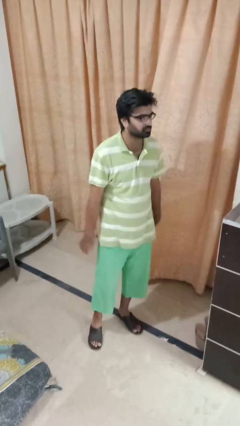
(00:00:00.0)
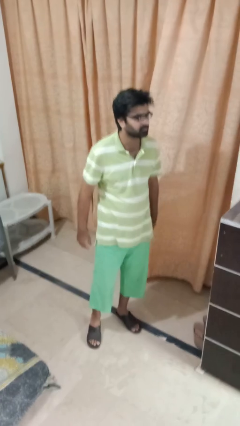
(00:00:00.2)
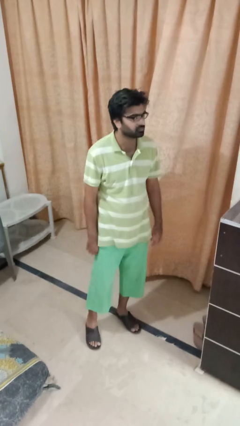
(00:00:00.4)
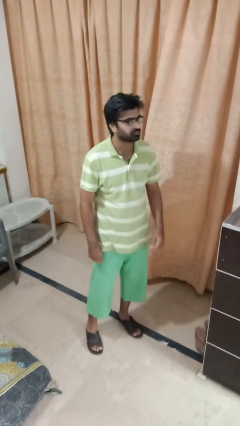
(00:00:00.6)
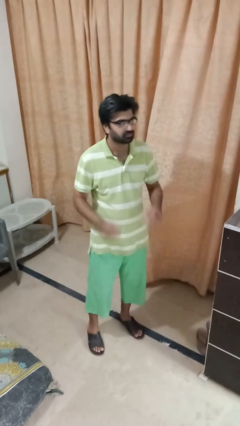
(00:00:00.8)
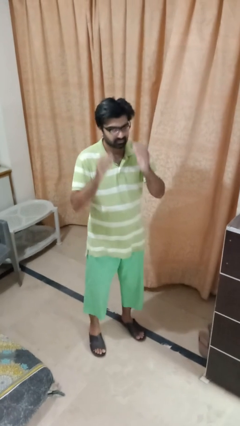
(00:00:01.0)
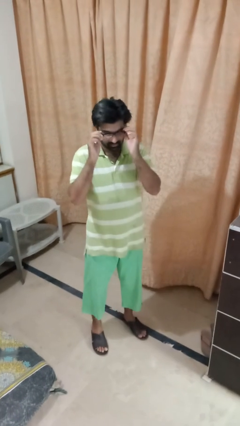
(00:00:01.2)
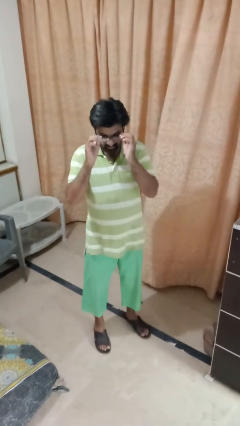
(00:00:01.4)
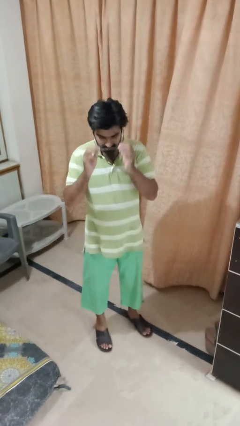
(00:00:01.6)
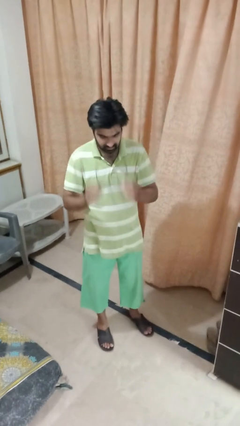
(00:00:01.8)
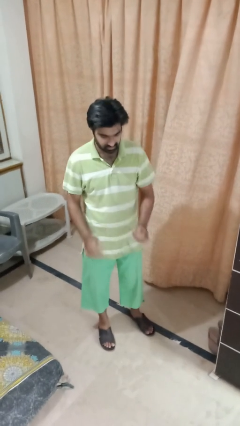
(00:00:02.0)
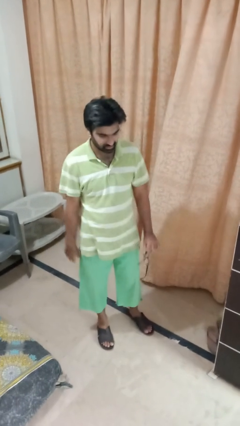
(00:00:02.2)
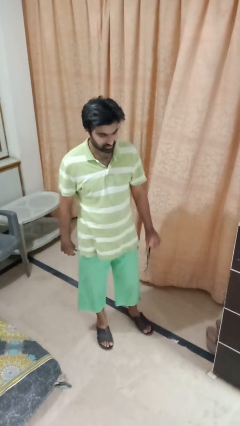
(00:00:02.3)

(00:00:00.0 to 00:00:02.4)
person takes off glasses

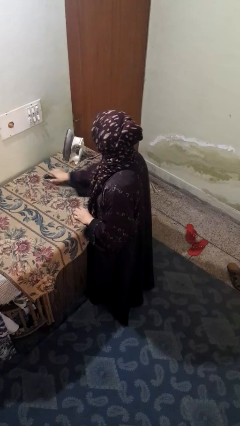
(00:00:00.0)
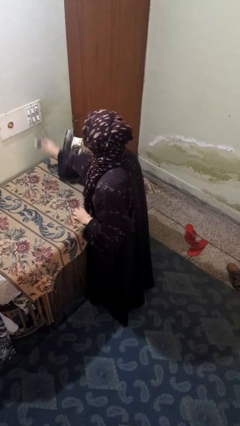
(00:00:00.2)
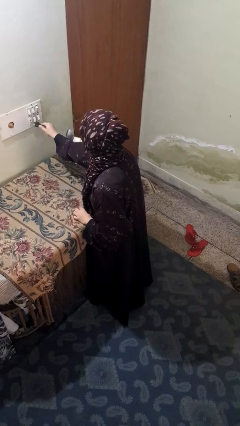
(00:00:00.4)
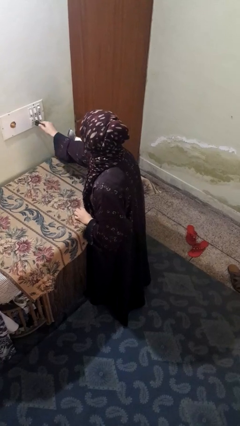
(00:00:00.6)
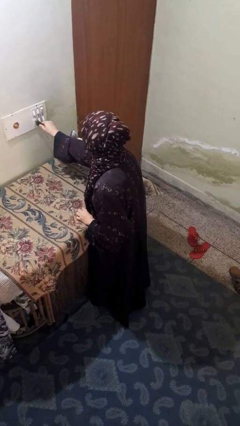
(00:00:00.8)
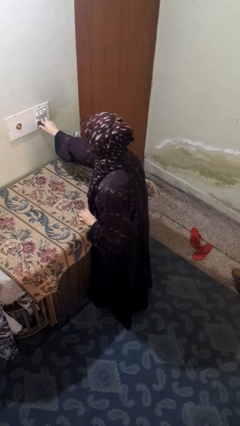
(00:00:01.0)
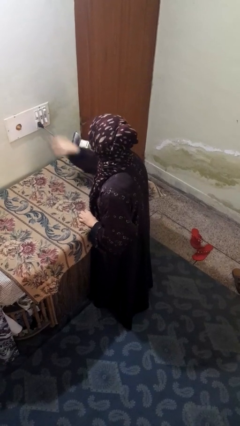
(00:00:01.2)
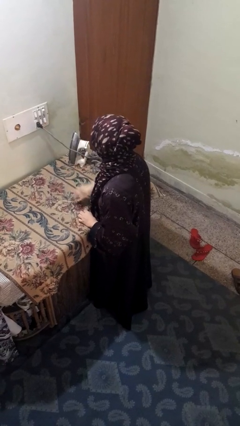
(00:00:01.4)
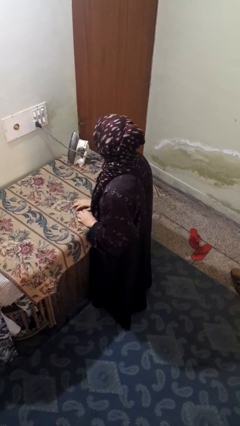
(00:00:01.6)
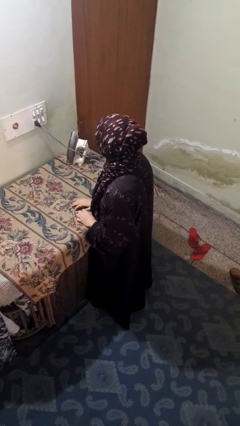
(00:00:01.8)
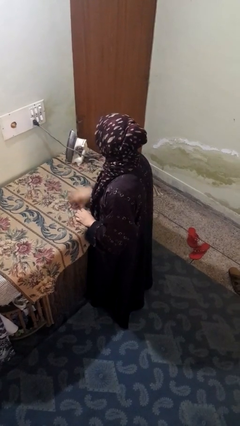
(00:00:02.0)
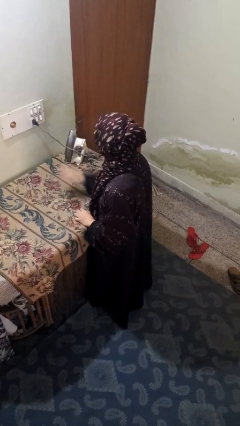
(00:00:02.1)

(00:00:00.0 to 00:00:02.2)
person plugs into electrical socket

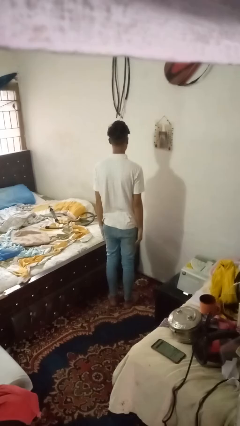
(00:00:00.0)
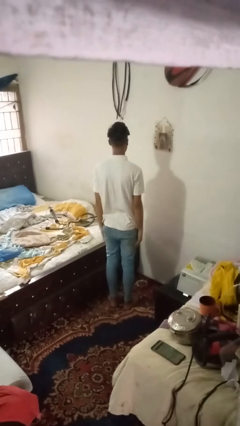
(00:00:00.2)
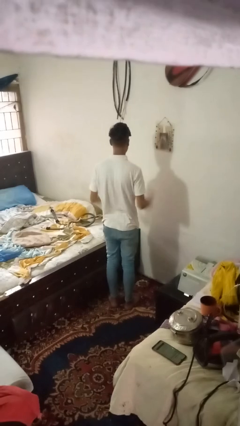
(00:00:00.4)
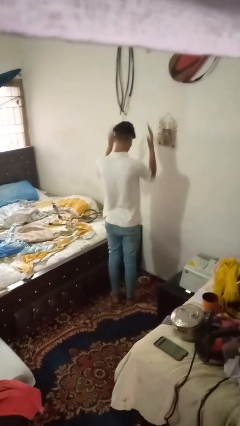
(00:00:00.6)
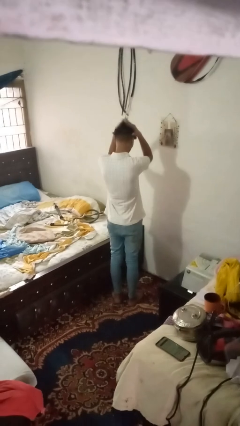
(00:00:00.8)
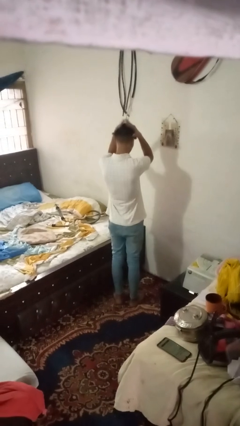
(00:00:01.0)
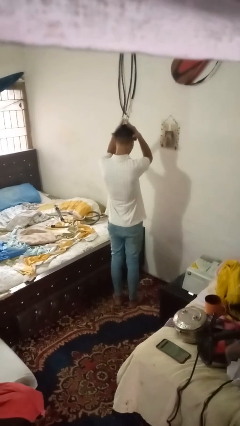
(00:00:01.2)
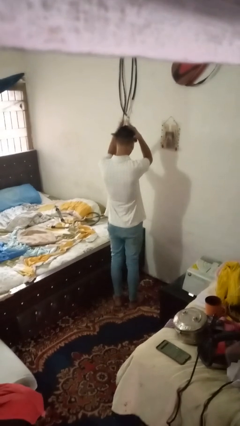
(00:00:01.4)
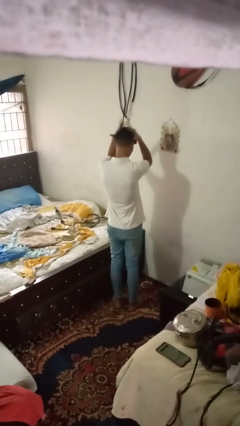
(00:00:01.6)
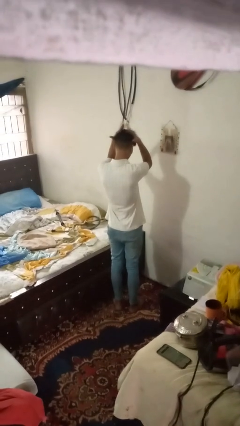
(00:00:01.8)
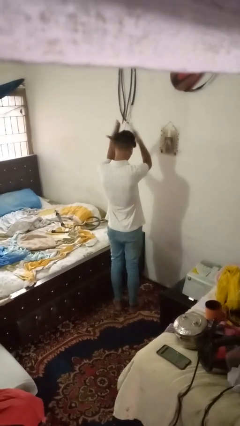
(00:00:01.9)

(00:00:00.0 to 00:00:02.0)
person pats head

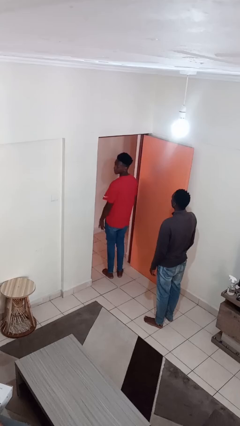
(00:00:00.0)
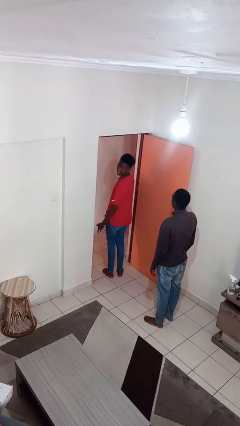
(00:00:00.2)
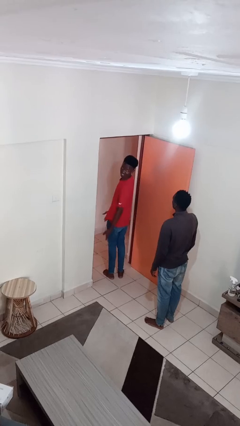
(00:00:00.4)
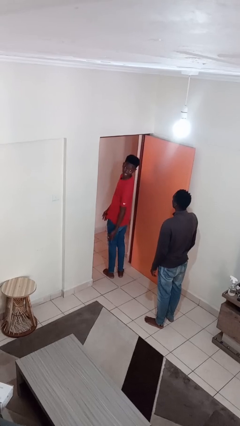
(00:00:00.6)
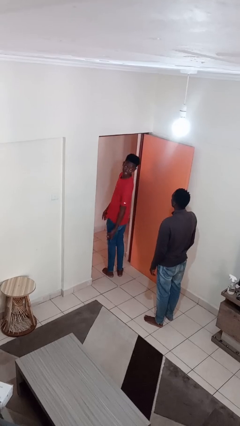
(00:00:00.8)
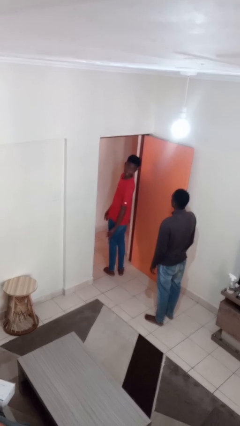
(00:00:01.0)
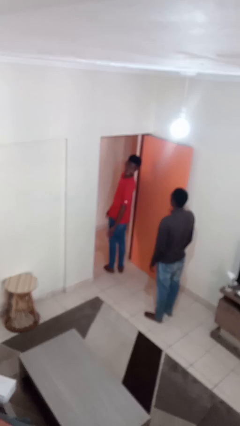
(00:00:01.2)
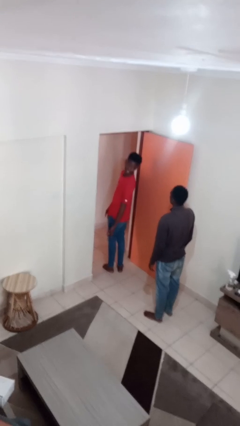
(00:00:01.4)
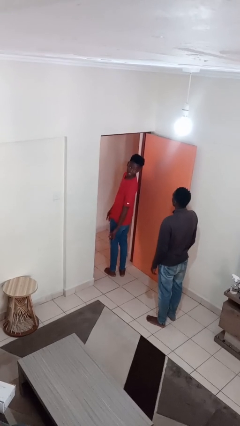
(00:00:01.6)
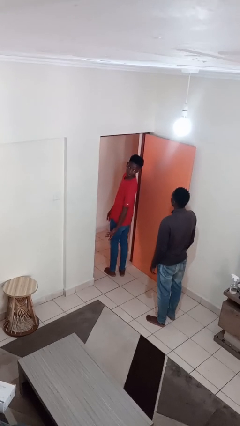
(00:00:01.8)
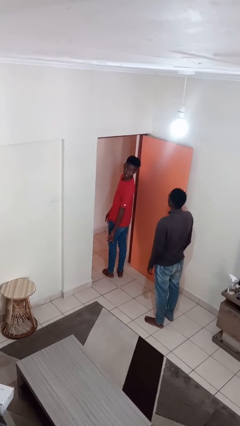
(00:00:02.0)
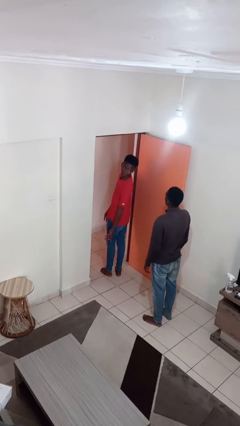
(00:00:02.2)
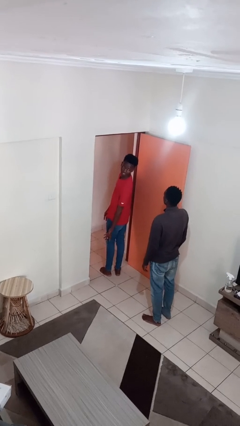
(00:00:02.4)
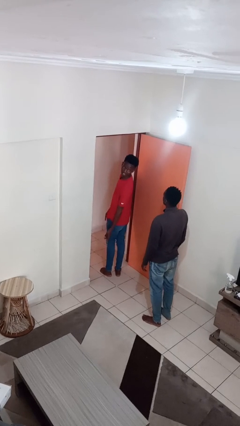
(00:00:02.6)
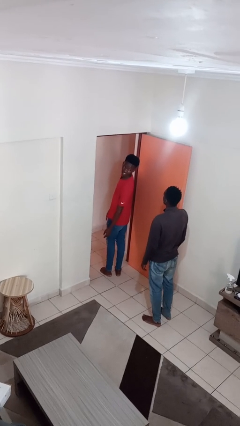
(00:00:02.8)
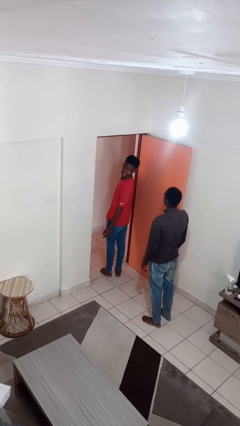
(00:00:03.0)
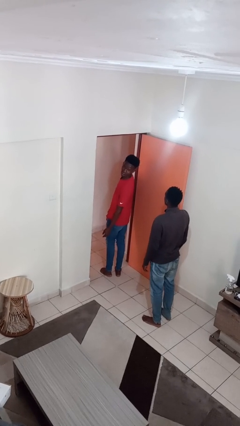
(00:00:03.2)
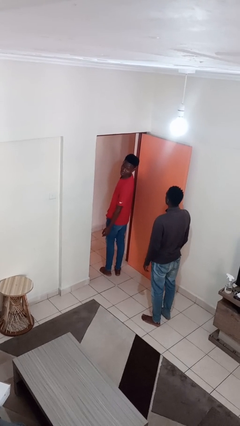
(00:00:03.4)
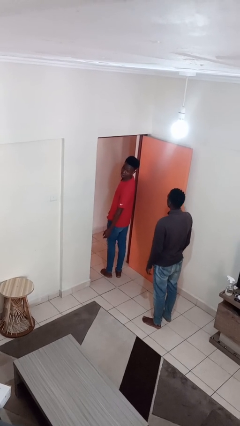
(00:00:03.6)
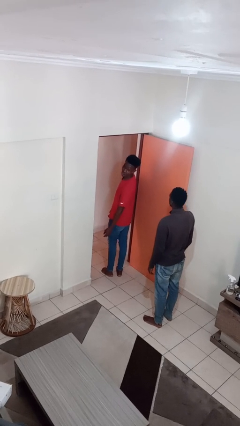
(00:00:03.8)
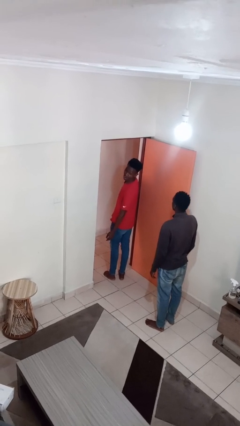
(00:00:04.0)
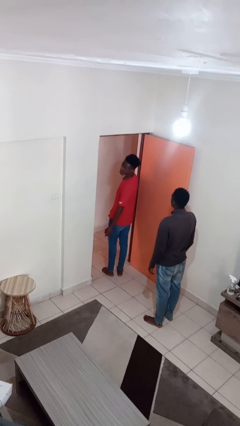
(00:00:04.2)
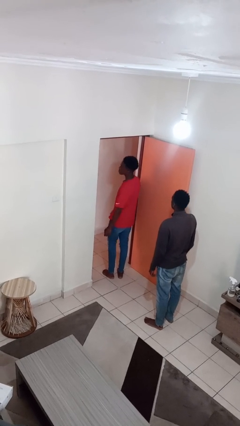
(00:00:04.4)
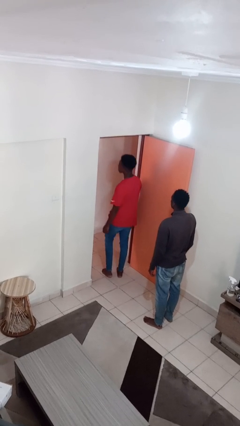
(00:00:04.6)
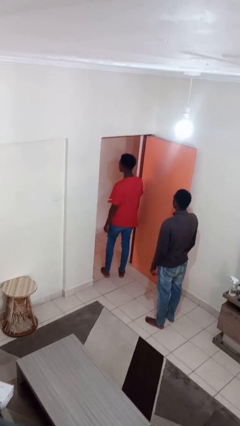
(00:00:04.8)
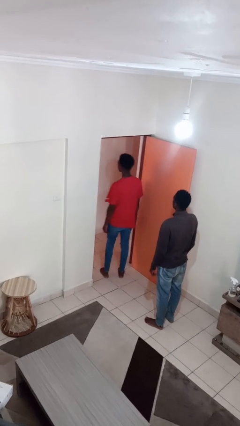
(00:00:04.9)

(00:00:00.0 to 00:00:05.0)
person looks over shoulder

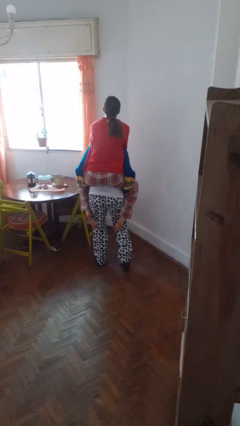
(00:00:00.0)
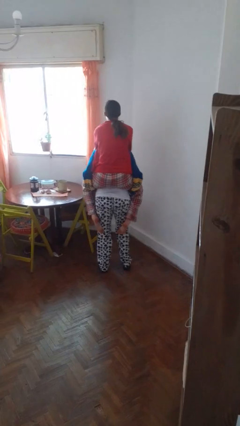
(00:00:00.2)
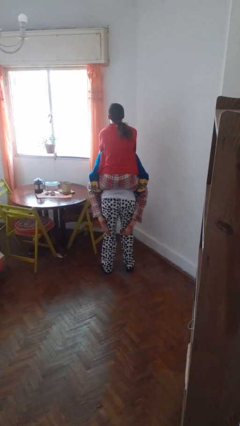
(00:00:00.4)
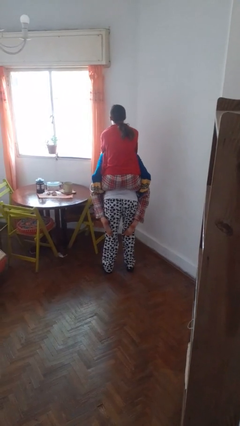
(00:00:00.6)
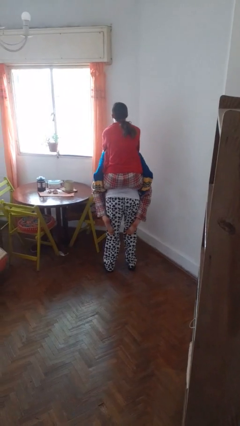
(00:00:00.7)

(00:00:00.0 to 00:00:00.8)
person carries person on back

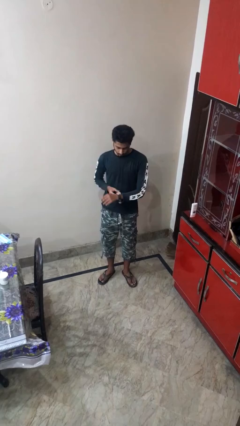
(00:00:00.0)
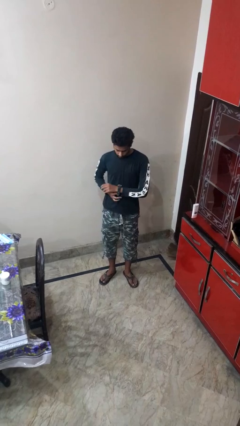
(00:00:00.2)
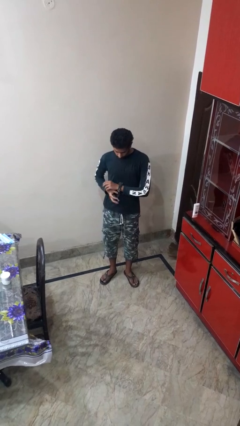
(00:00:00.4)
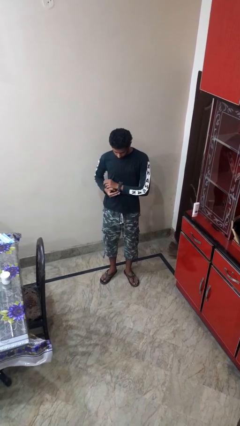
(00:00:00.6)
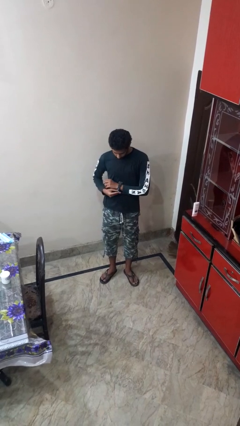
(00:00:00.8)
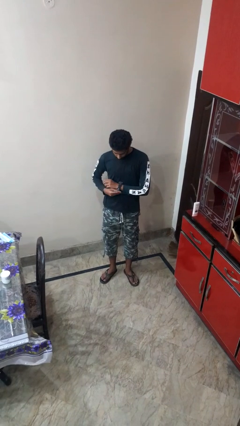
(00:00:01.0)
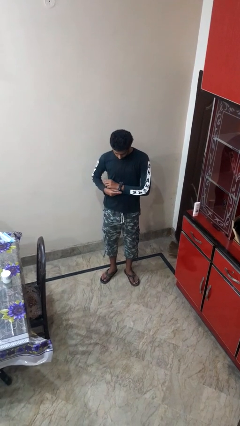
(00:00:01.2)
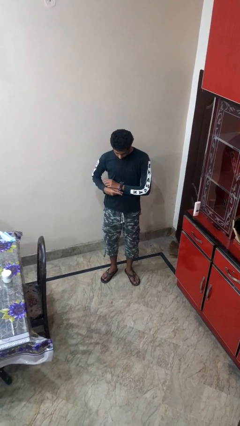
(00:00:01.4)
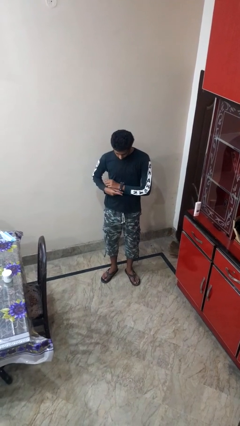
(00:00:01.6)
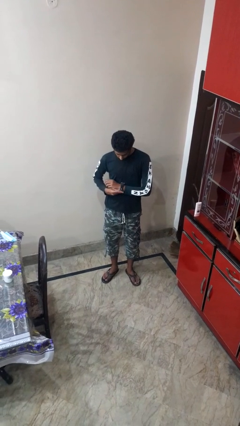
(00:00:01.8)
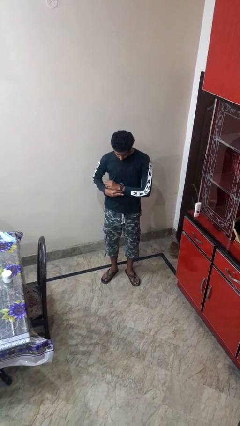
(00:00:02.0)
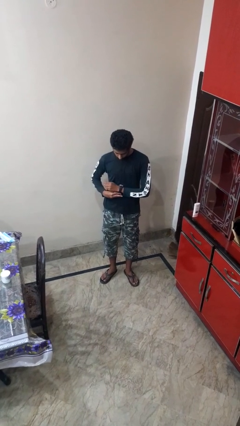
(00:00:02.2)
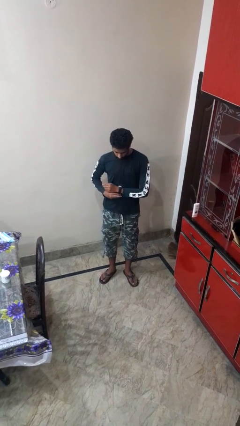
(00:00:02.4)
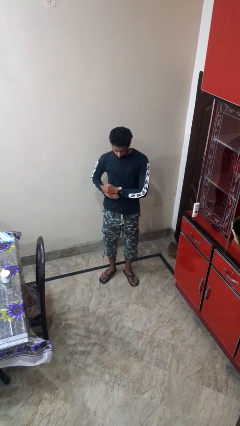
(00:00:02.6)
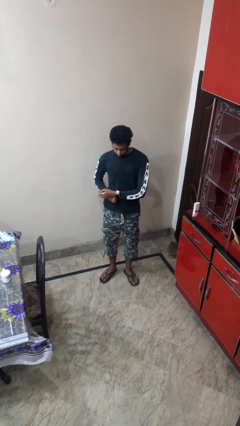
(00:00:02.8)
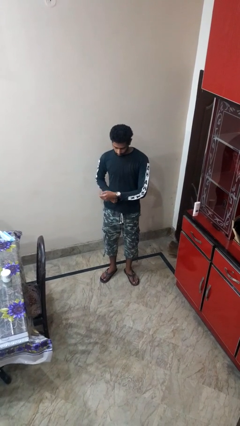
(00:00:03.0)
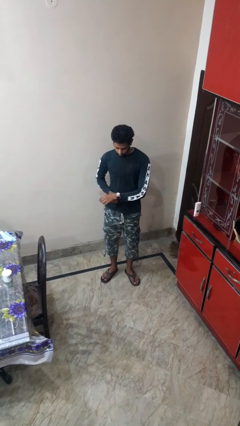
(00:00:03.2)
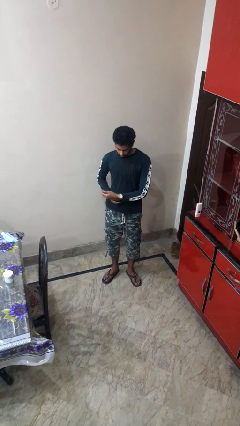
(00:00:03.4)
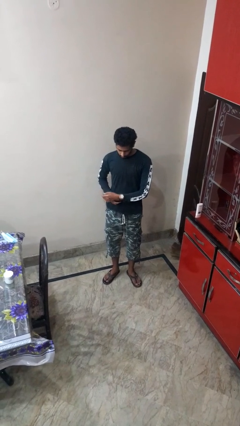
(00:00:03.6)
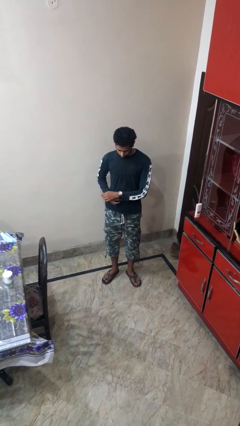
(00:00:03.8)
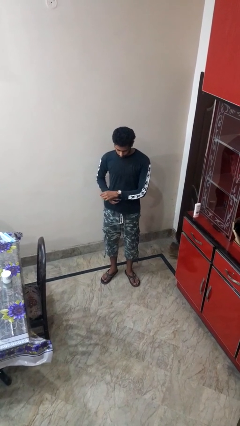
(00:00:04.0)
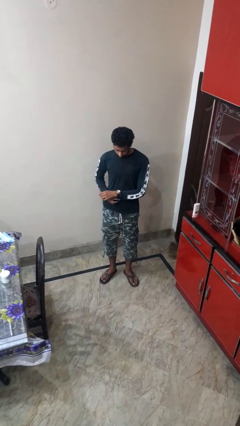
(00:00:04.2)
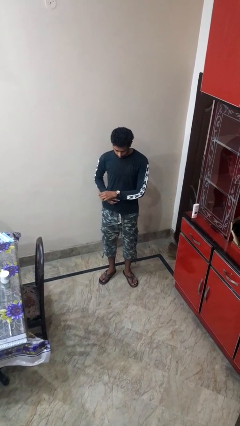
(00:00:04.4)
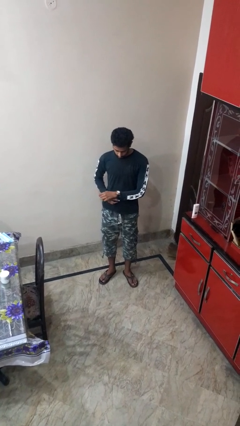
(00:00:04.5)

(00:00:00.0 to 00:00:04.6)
person puts on wristwatch
